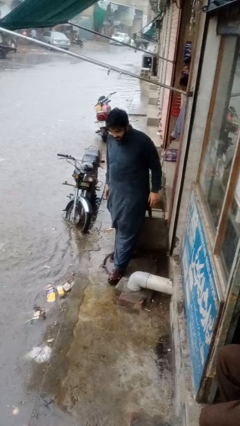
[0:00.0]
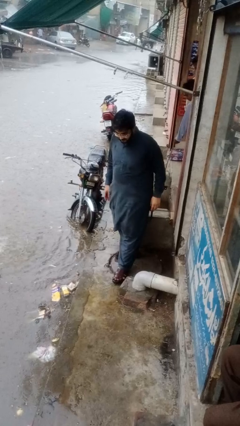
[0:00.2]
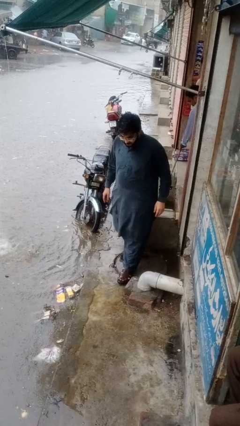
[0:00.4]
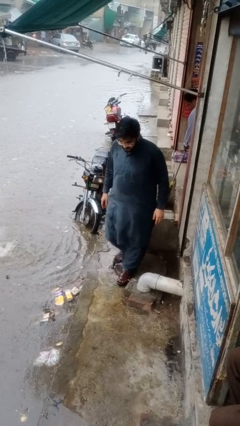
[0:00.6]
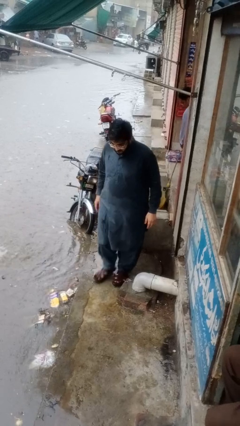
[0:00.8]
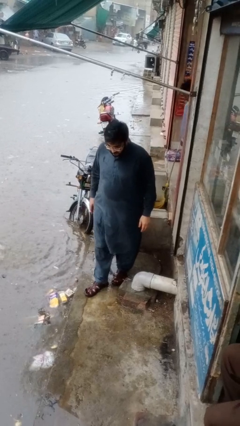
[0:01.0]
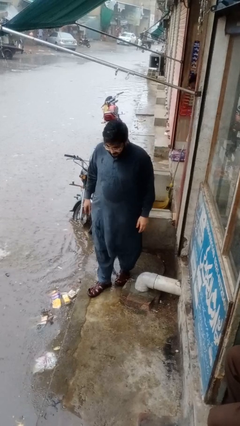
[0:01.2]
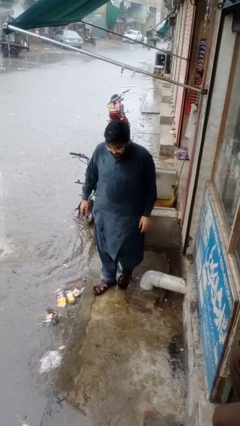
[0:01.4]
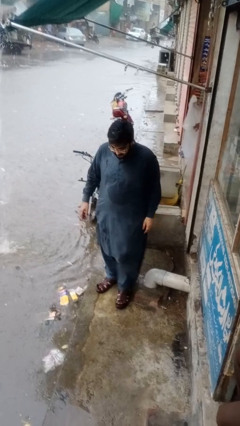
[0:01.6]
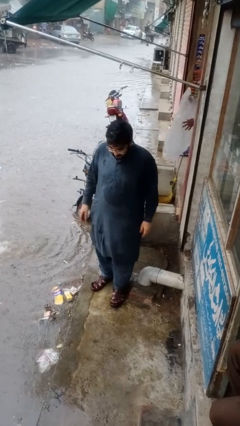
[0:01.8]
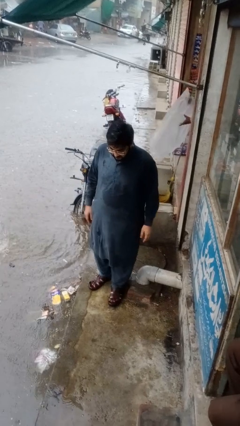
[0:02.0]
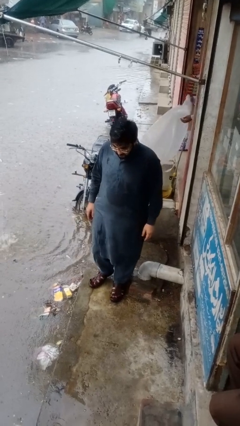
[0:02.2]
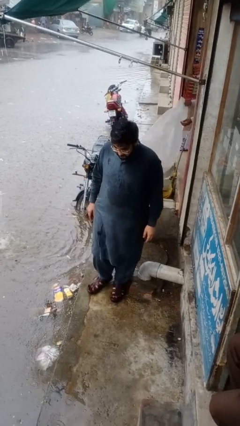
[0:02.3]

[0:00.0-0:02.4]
person trips on object on floor

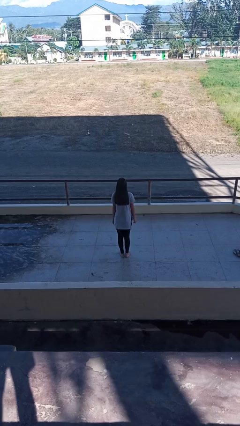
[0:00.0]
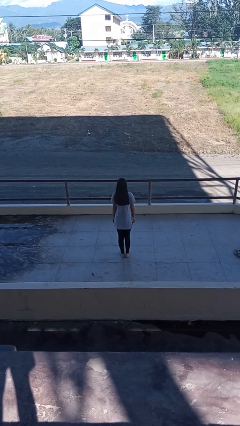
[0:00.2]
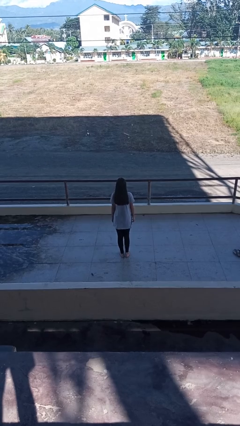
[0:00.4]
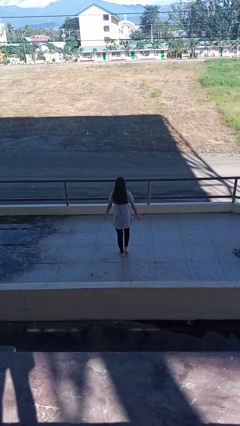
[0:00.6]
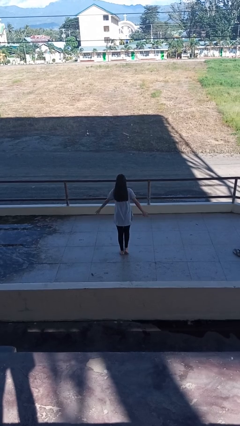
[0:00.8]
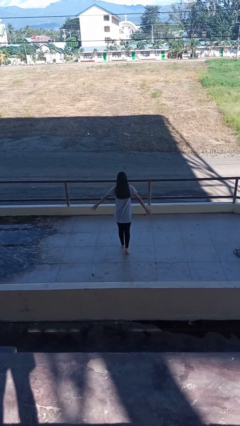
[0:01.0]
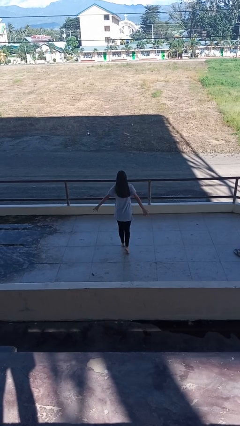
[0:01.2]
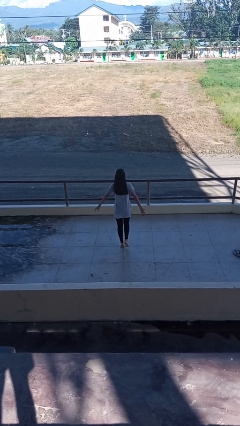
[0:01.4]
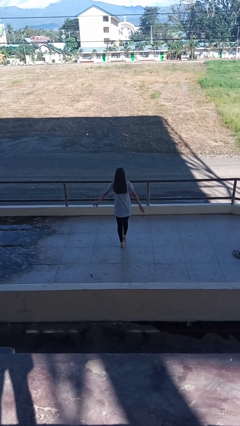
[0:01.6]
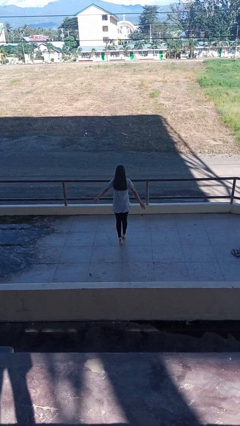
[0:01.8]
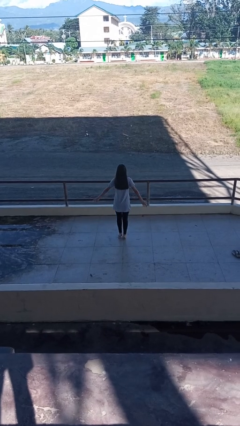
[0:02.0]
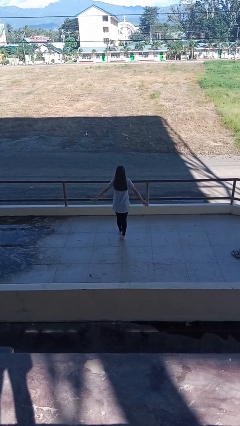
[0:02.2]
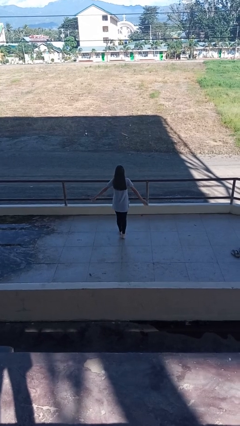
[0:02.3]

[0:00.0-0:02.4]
person walks tiptoe

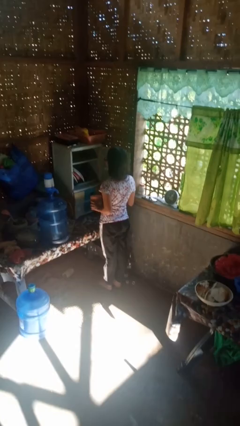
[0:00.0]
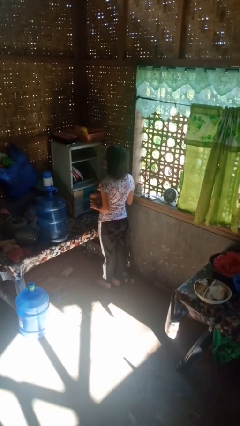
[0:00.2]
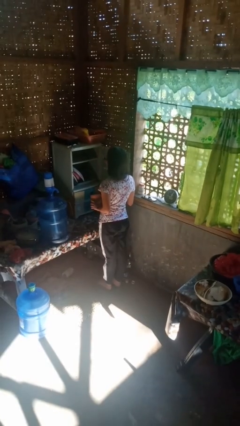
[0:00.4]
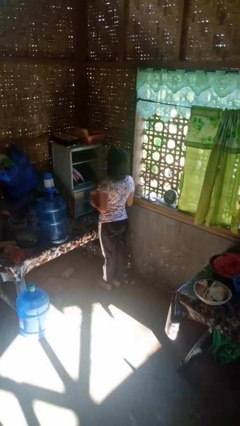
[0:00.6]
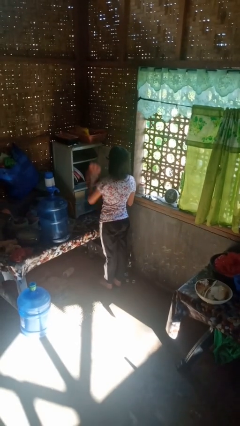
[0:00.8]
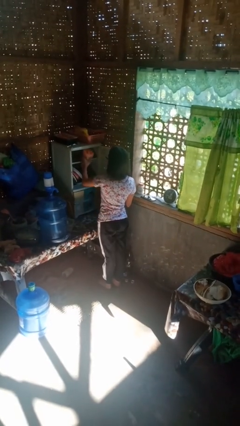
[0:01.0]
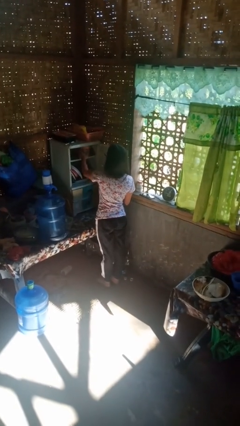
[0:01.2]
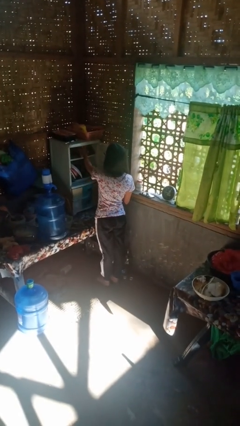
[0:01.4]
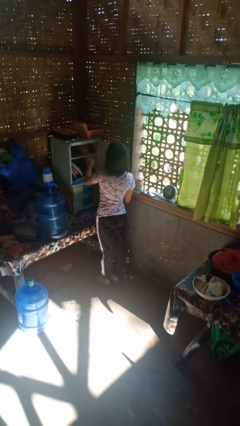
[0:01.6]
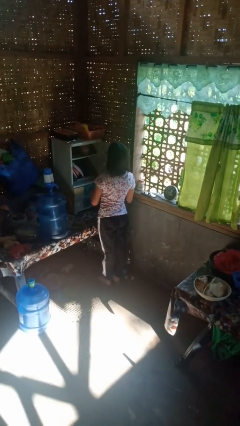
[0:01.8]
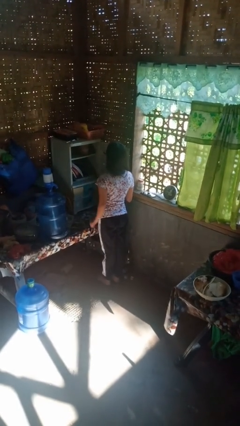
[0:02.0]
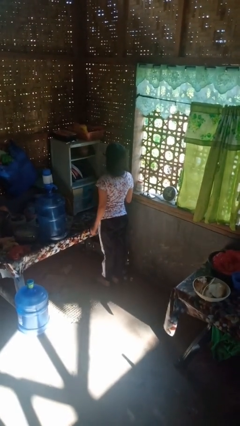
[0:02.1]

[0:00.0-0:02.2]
person puts down object into cabinet

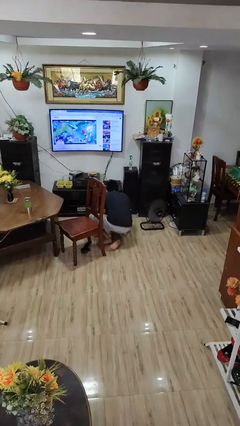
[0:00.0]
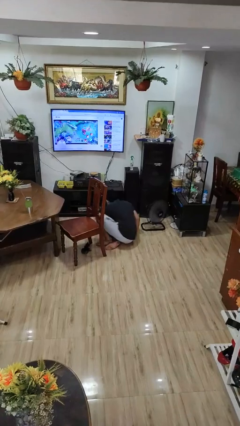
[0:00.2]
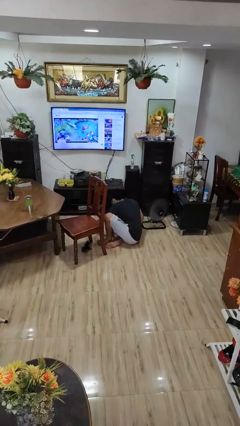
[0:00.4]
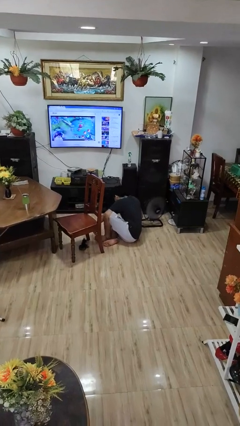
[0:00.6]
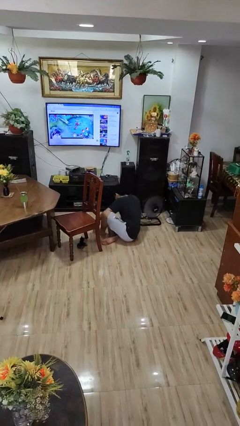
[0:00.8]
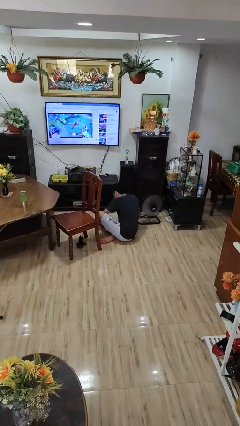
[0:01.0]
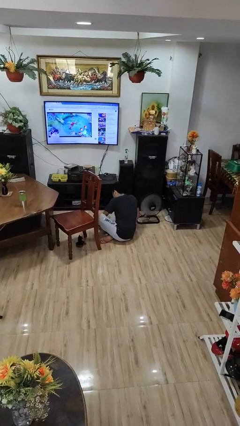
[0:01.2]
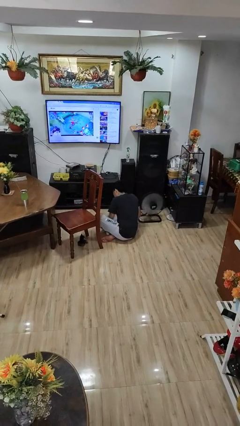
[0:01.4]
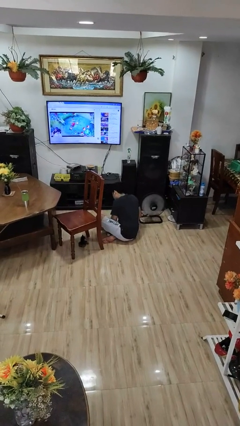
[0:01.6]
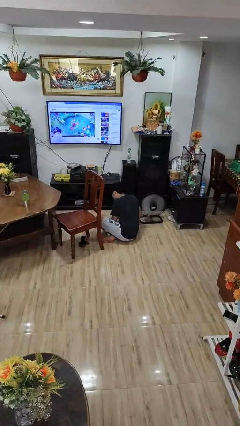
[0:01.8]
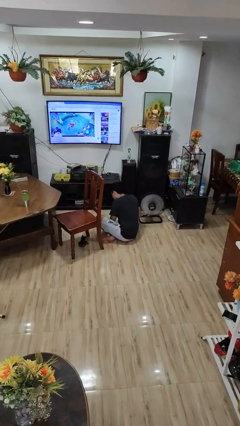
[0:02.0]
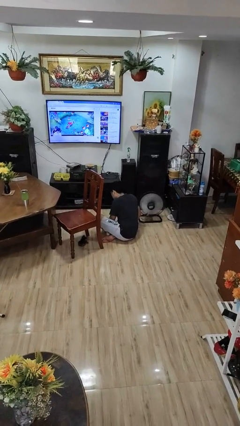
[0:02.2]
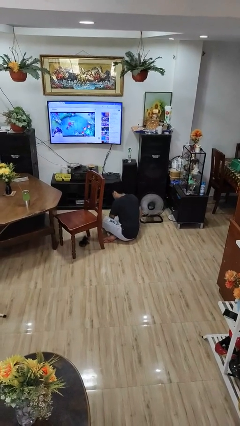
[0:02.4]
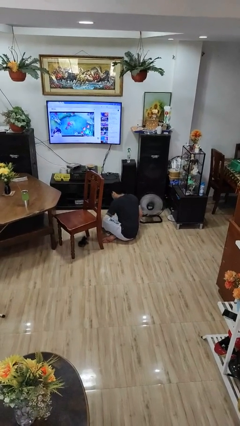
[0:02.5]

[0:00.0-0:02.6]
person lies down on floor

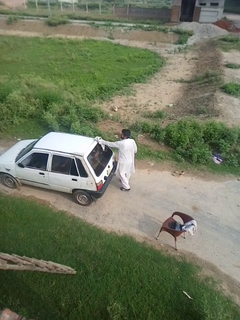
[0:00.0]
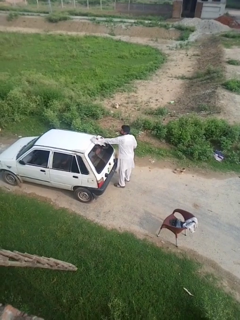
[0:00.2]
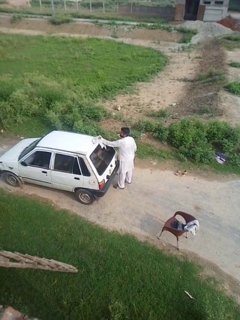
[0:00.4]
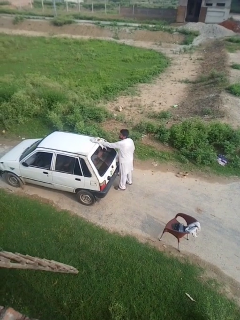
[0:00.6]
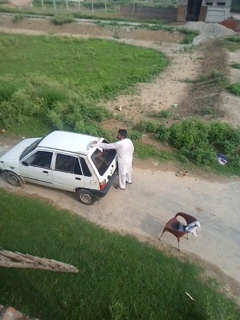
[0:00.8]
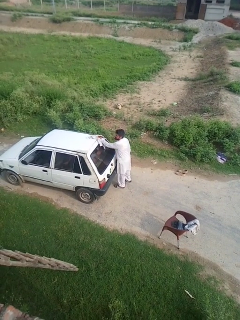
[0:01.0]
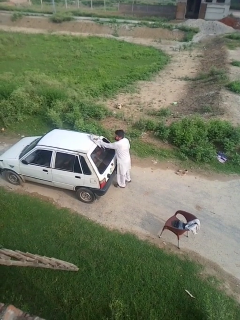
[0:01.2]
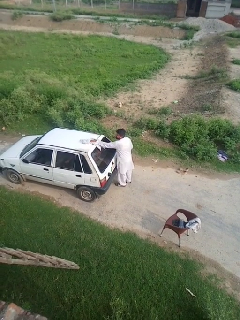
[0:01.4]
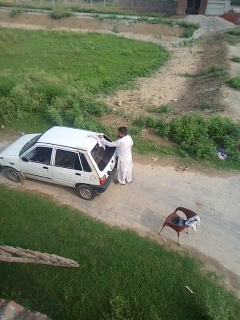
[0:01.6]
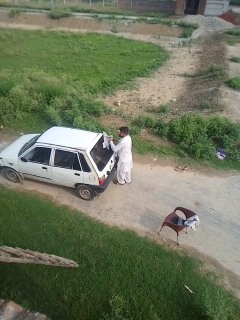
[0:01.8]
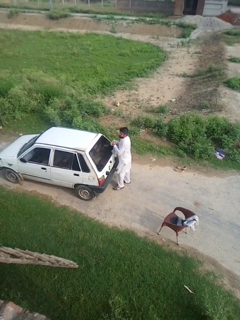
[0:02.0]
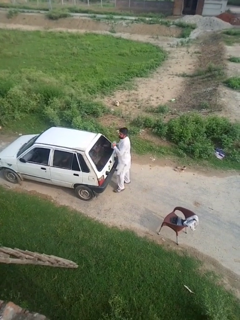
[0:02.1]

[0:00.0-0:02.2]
person polishes car with rag

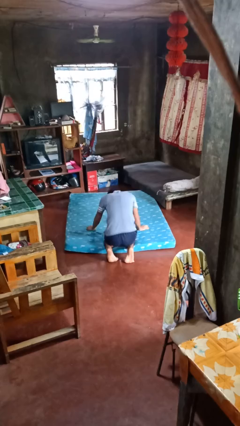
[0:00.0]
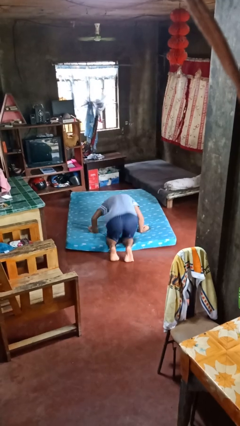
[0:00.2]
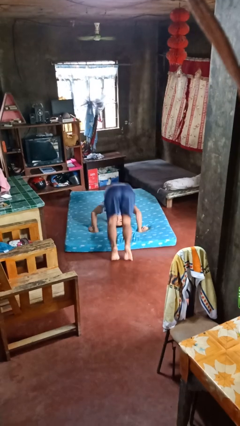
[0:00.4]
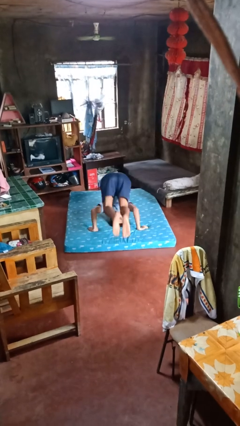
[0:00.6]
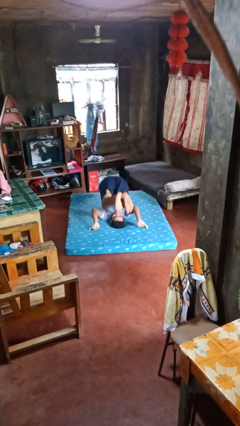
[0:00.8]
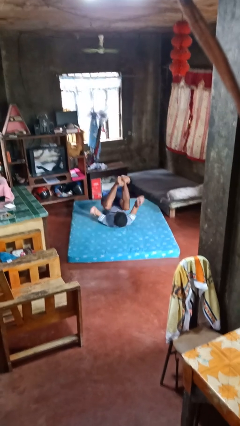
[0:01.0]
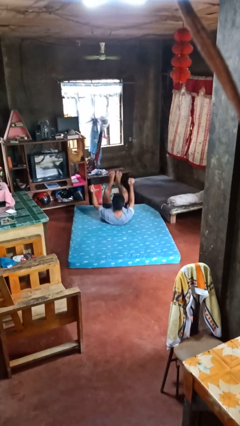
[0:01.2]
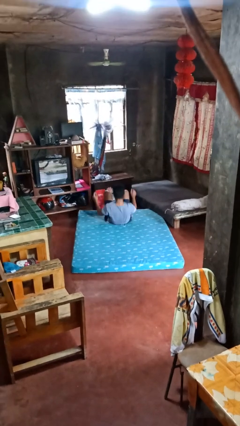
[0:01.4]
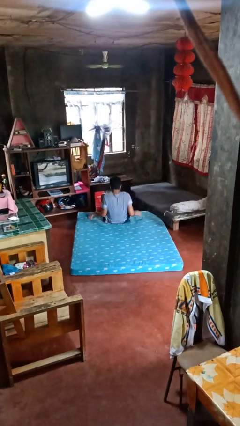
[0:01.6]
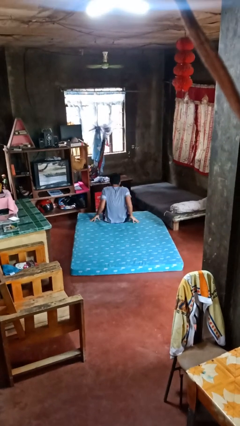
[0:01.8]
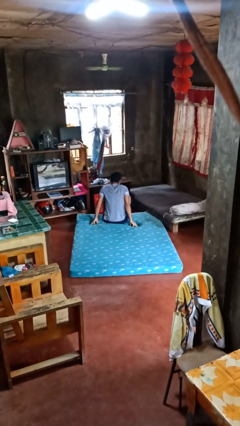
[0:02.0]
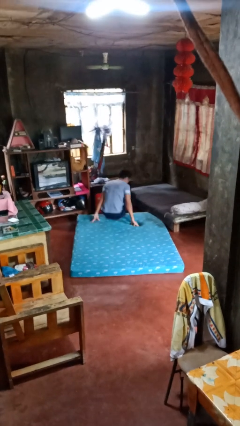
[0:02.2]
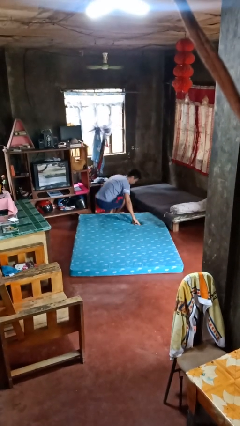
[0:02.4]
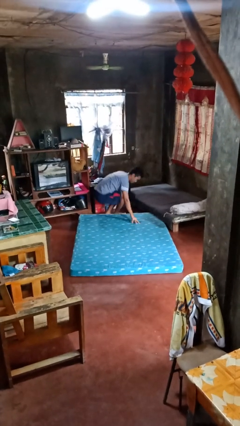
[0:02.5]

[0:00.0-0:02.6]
person somersaults

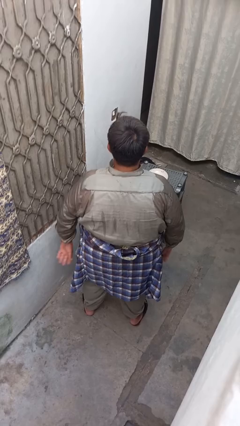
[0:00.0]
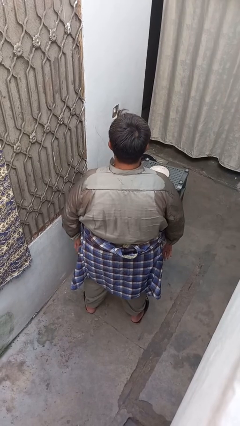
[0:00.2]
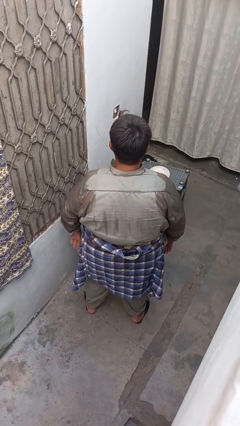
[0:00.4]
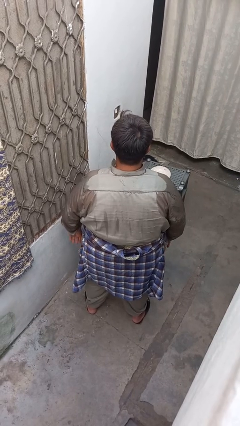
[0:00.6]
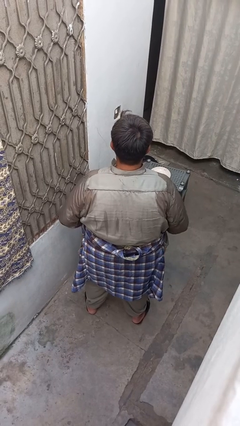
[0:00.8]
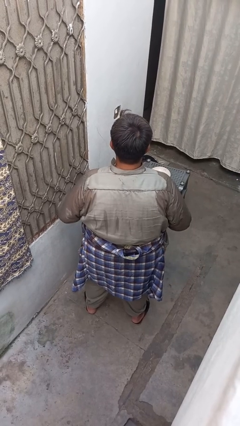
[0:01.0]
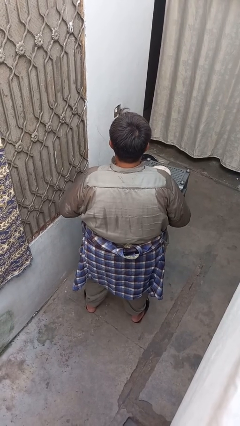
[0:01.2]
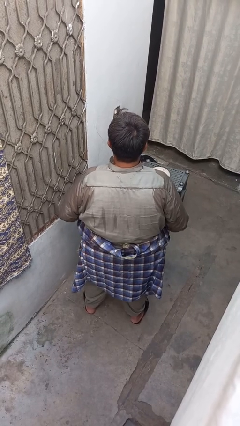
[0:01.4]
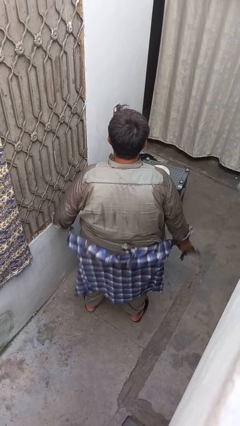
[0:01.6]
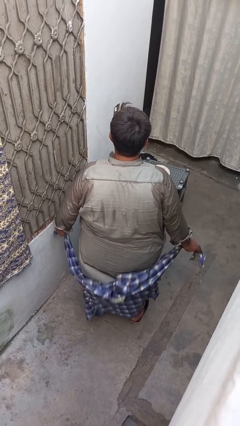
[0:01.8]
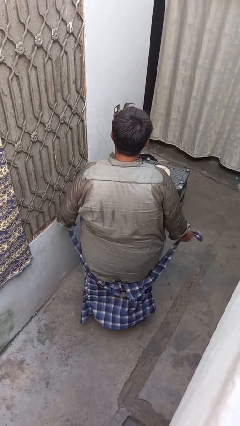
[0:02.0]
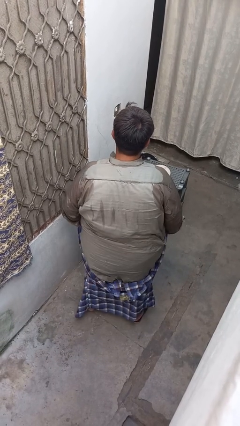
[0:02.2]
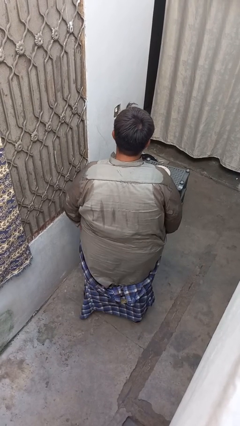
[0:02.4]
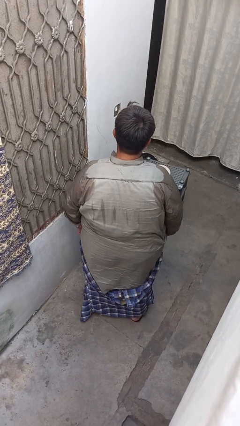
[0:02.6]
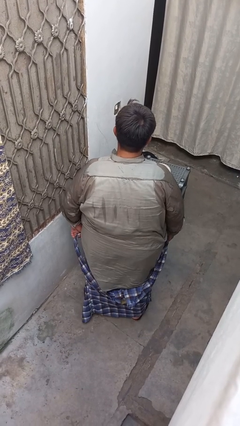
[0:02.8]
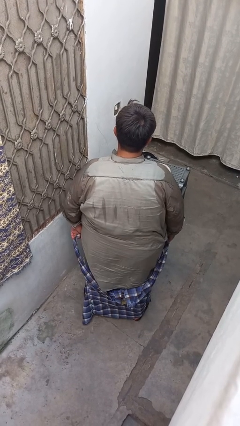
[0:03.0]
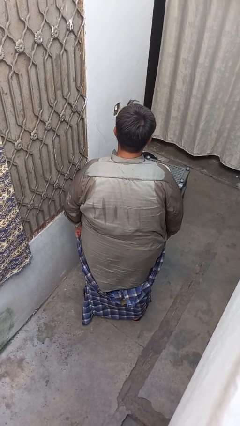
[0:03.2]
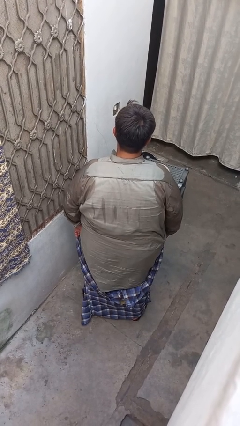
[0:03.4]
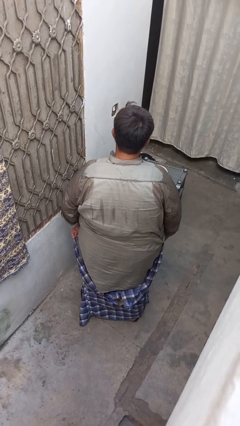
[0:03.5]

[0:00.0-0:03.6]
person unties jacket around waist
